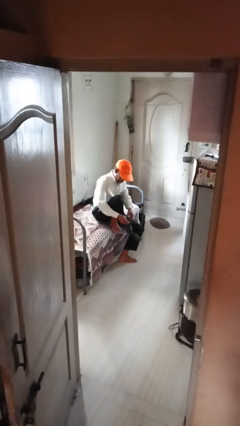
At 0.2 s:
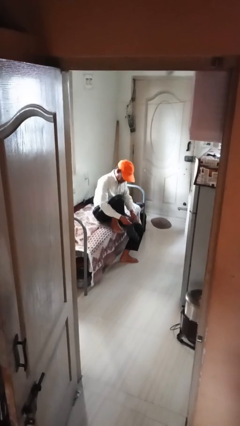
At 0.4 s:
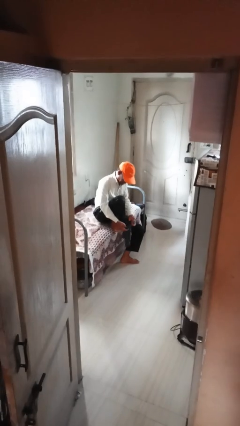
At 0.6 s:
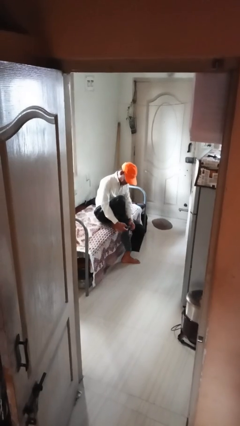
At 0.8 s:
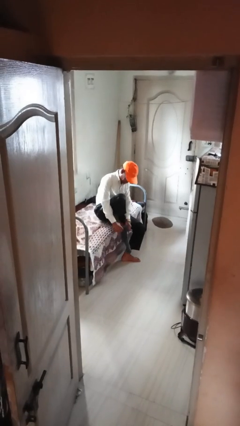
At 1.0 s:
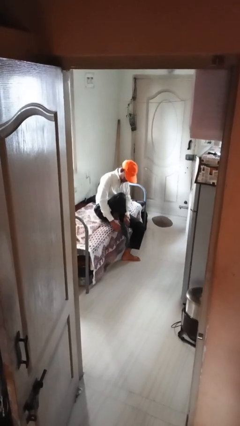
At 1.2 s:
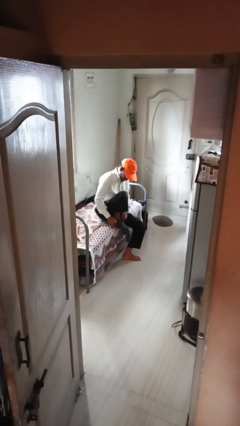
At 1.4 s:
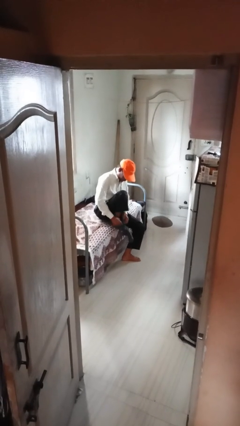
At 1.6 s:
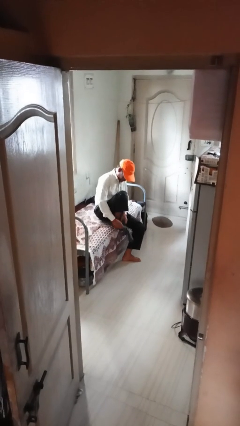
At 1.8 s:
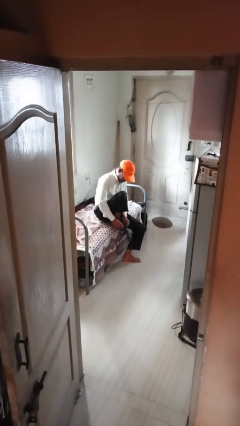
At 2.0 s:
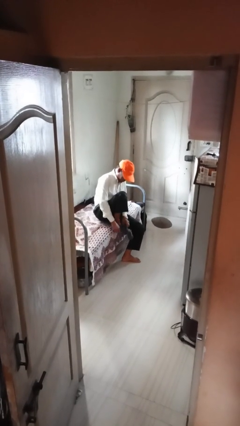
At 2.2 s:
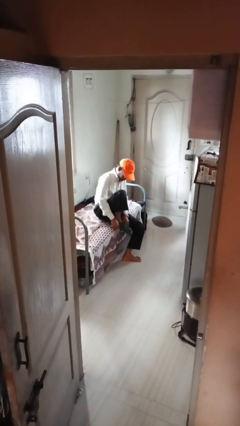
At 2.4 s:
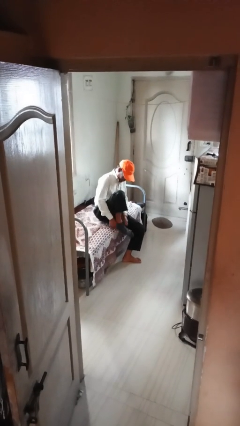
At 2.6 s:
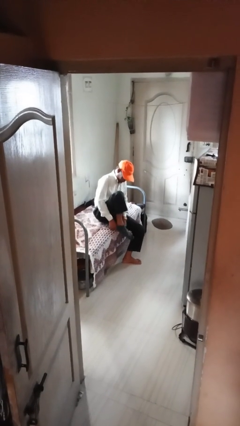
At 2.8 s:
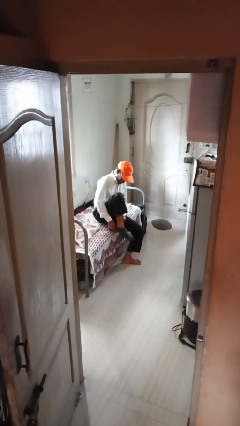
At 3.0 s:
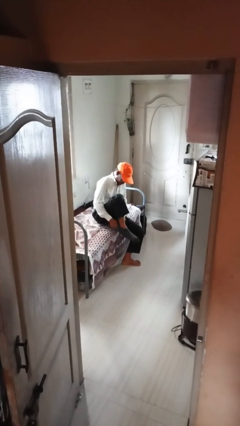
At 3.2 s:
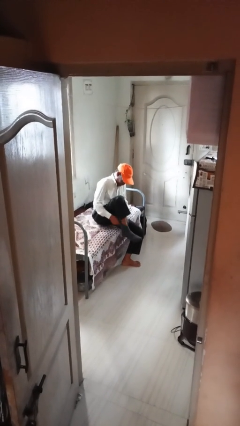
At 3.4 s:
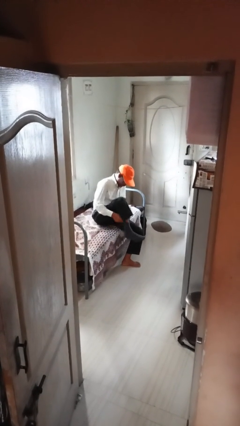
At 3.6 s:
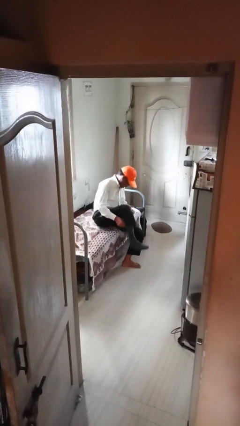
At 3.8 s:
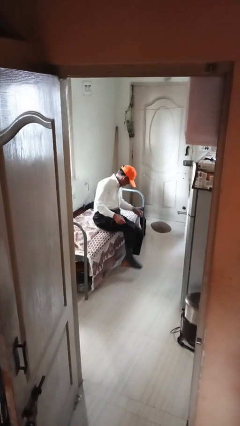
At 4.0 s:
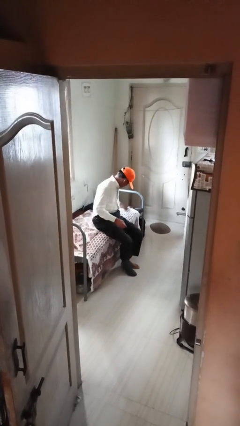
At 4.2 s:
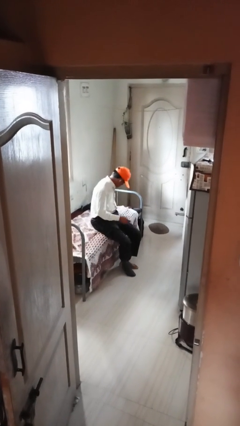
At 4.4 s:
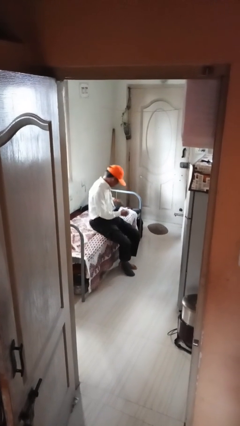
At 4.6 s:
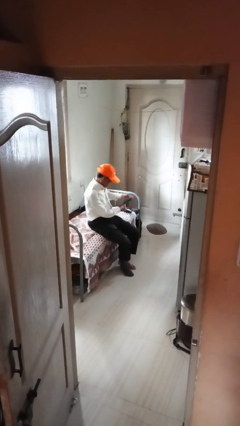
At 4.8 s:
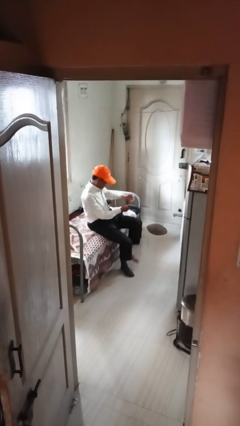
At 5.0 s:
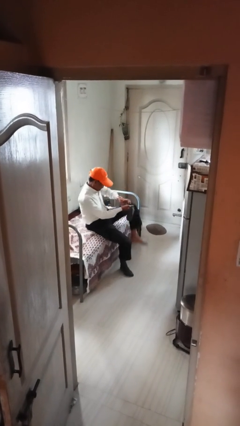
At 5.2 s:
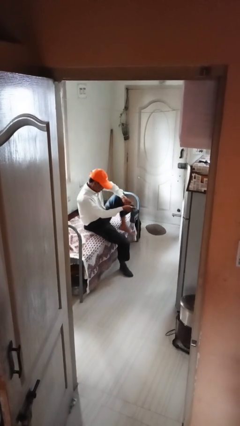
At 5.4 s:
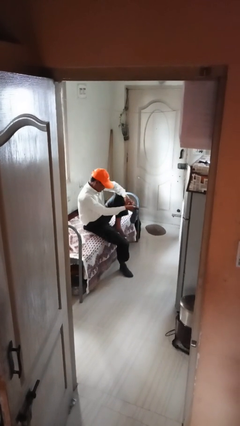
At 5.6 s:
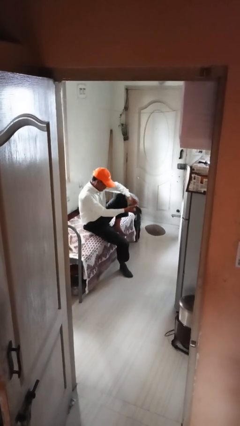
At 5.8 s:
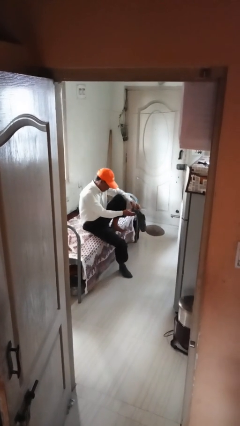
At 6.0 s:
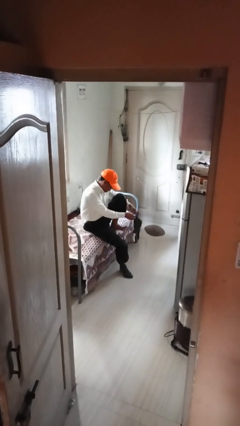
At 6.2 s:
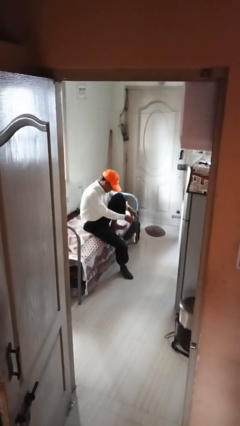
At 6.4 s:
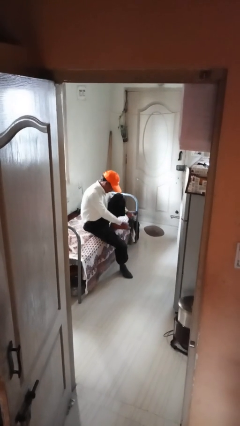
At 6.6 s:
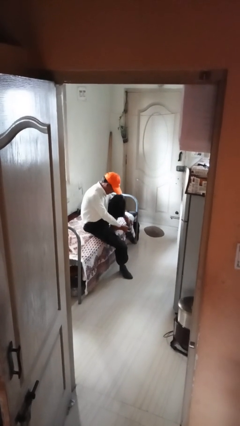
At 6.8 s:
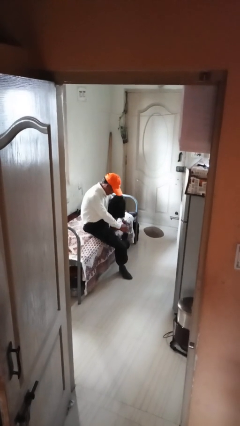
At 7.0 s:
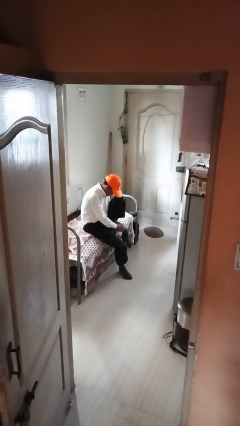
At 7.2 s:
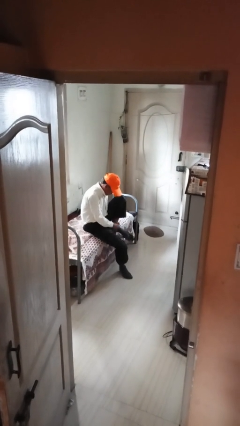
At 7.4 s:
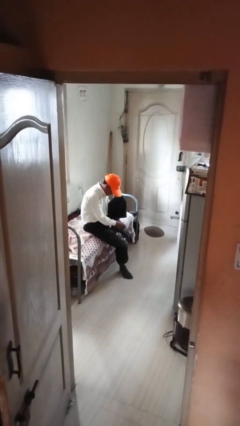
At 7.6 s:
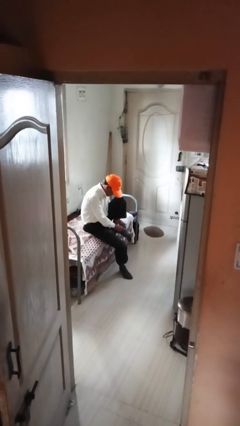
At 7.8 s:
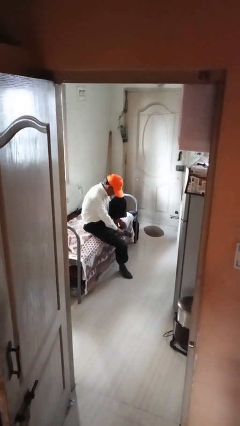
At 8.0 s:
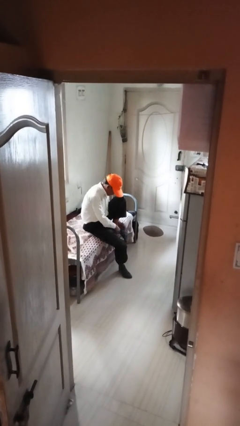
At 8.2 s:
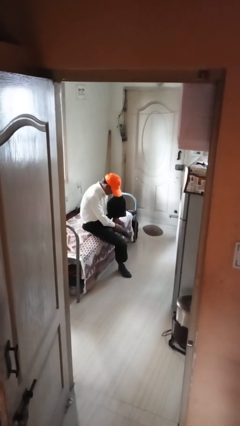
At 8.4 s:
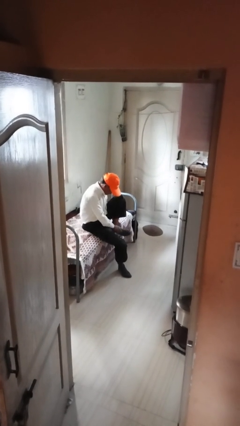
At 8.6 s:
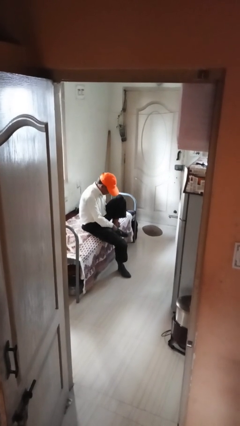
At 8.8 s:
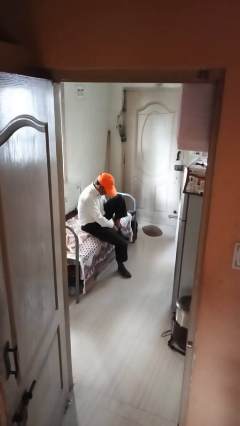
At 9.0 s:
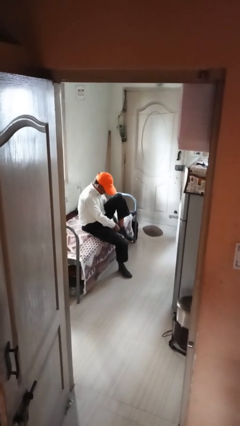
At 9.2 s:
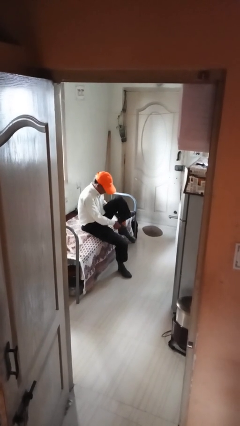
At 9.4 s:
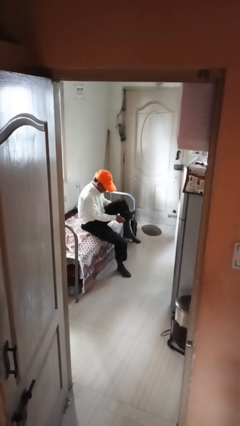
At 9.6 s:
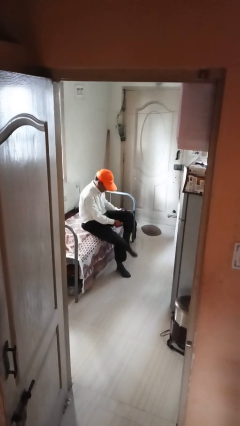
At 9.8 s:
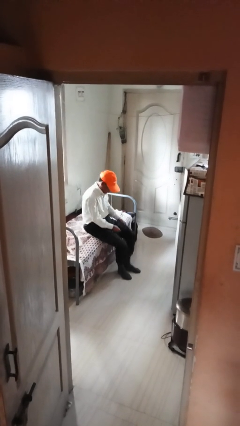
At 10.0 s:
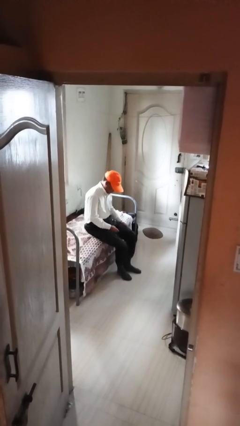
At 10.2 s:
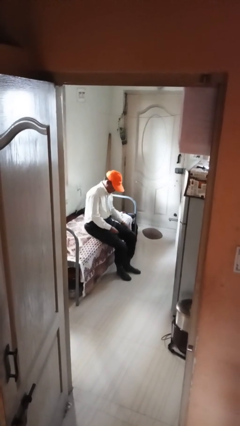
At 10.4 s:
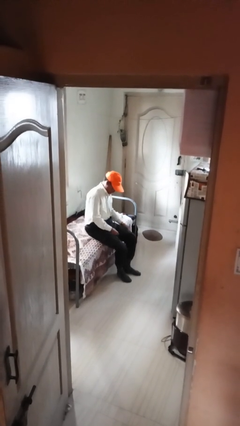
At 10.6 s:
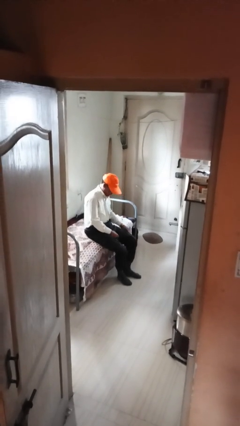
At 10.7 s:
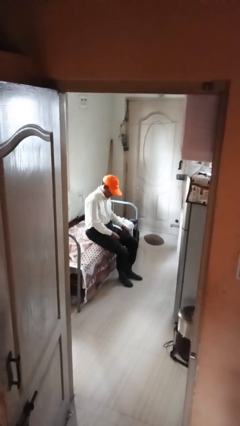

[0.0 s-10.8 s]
person puts on socks

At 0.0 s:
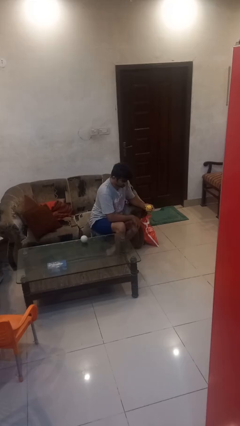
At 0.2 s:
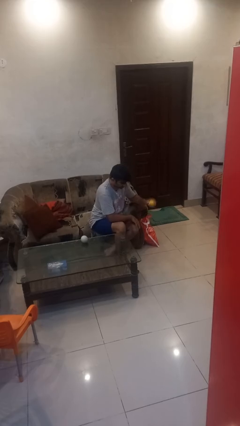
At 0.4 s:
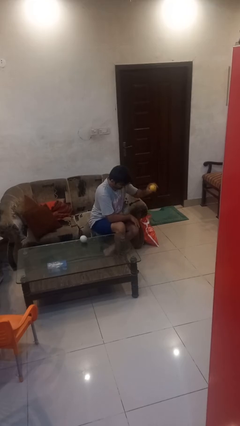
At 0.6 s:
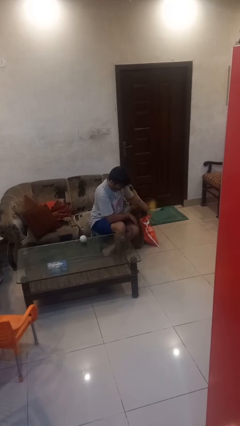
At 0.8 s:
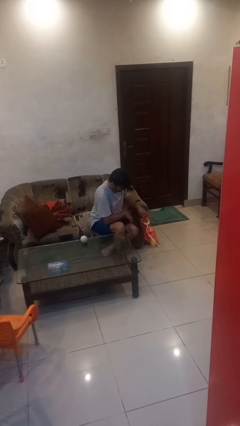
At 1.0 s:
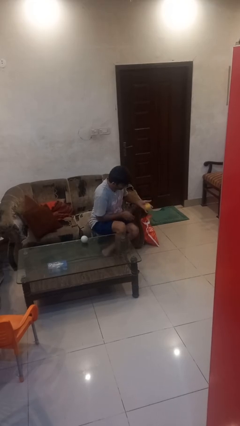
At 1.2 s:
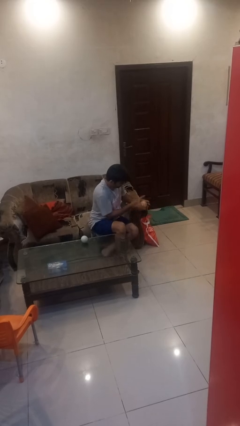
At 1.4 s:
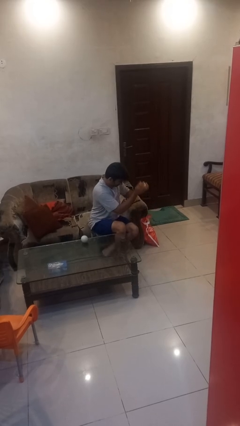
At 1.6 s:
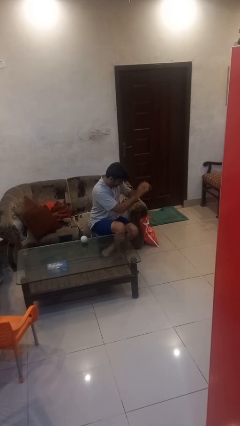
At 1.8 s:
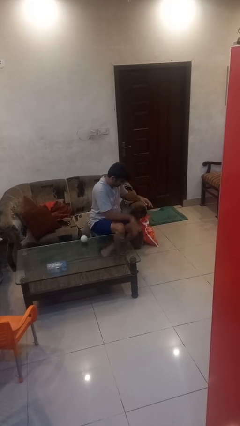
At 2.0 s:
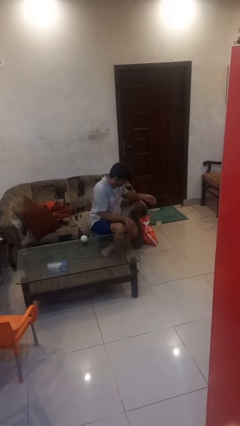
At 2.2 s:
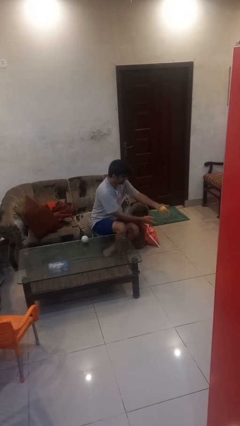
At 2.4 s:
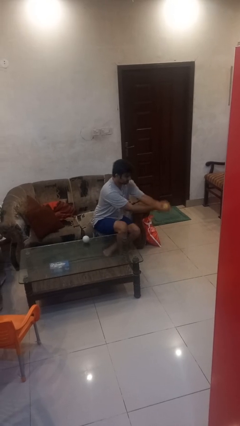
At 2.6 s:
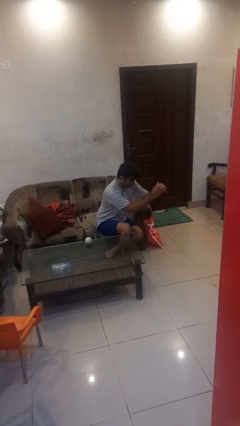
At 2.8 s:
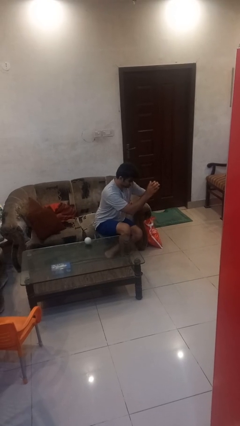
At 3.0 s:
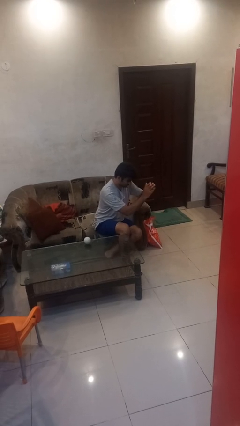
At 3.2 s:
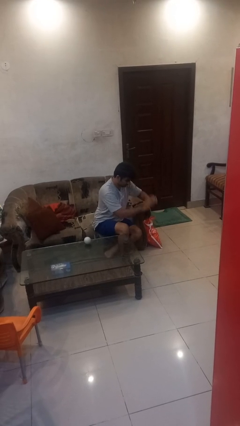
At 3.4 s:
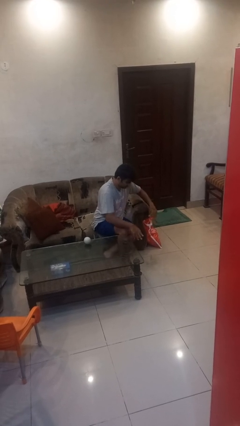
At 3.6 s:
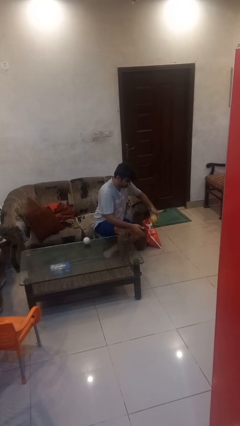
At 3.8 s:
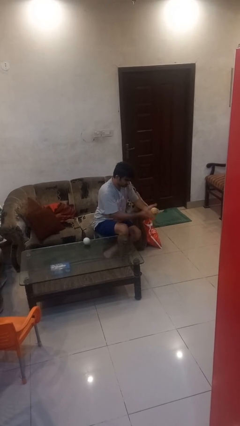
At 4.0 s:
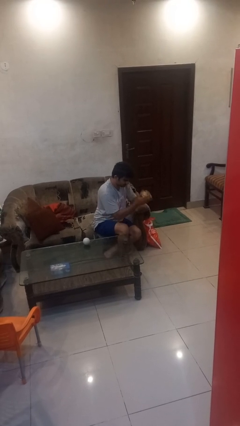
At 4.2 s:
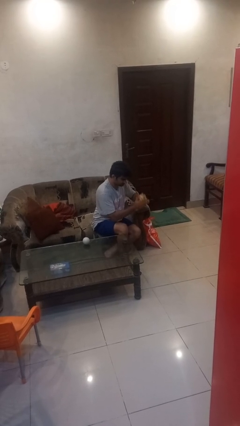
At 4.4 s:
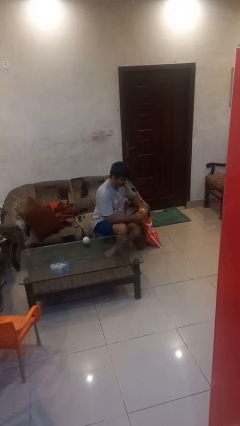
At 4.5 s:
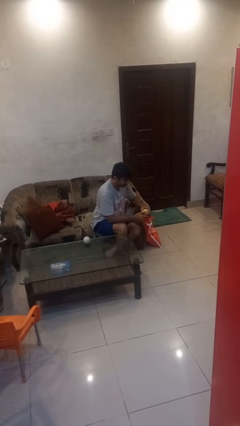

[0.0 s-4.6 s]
person bounces ball on floor

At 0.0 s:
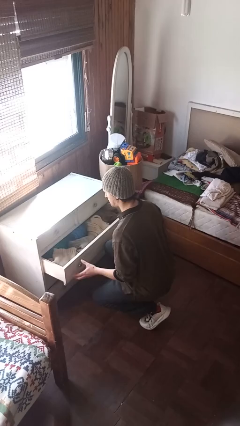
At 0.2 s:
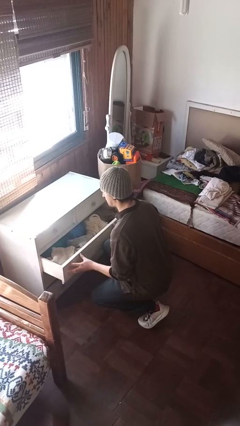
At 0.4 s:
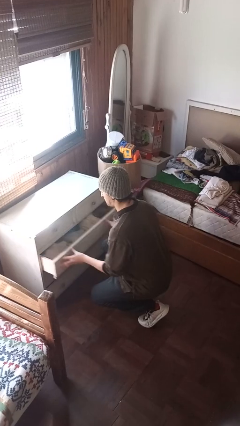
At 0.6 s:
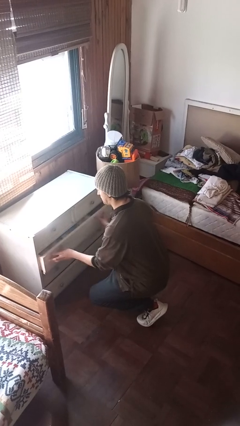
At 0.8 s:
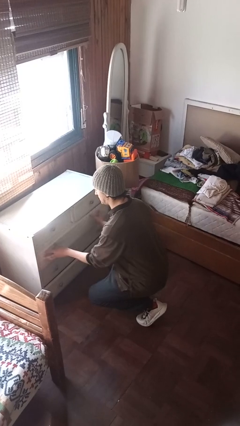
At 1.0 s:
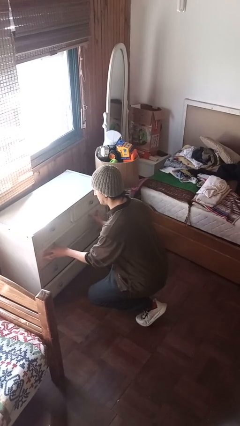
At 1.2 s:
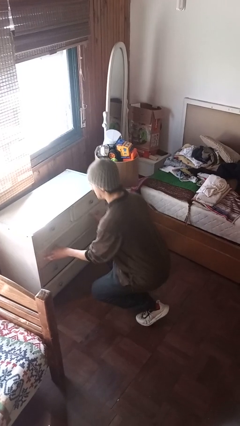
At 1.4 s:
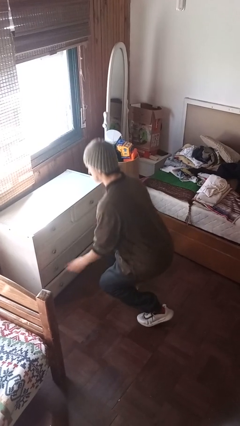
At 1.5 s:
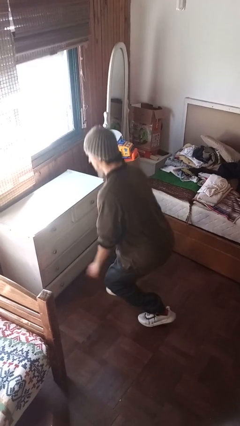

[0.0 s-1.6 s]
person closes dresser drawer

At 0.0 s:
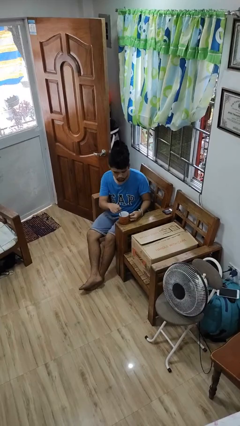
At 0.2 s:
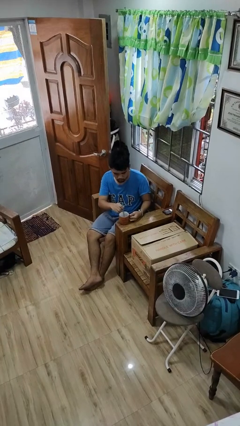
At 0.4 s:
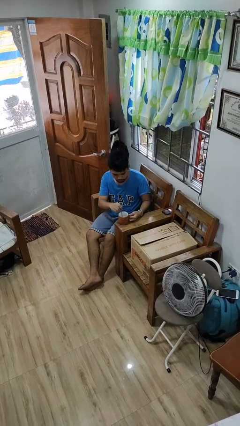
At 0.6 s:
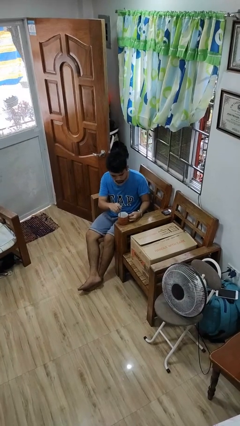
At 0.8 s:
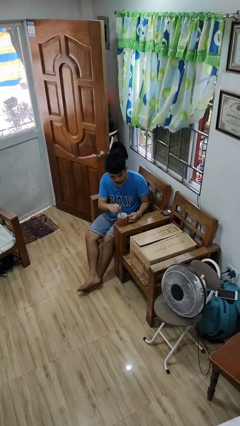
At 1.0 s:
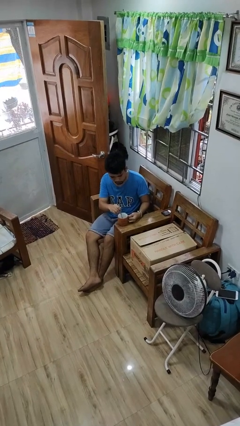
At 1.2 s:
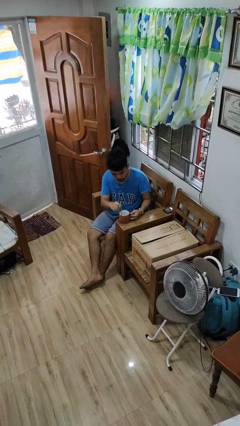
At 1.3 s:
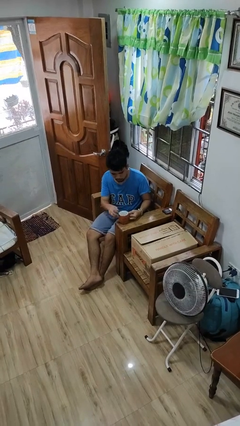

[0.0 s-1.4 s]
person stirs mug
